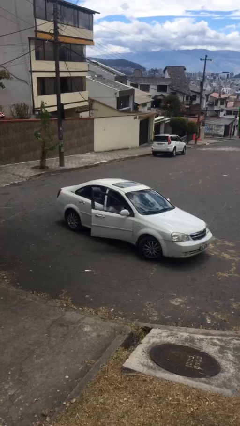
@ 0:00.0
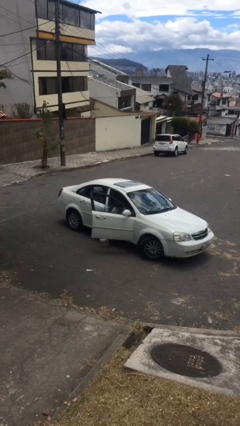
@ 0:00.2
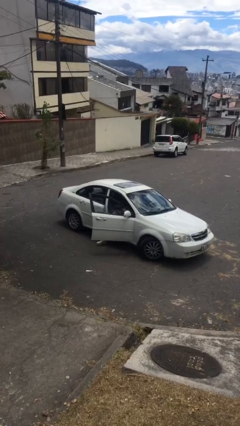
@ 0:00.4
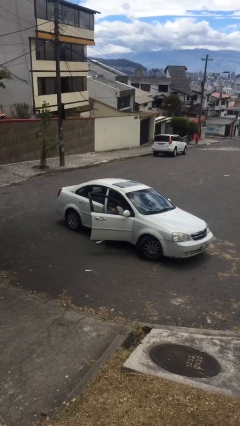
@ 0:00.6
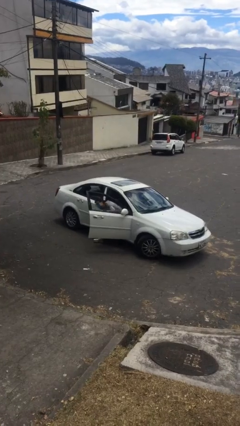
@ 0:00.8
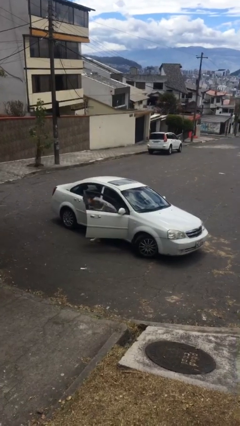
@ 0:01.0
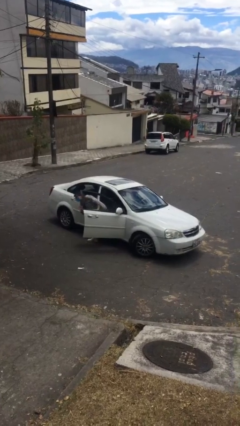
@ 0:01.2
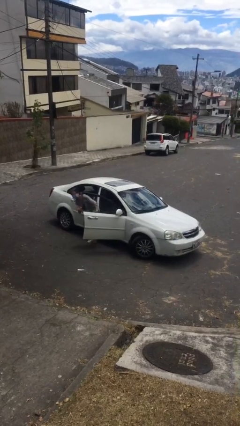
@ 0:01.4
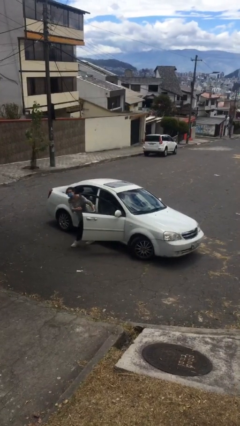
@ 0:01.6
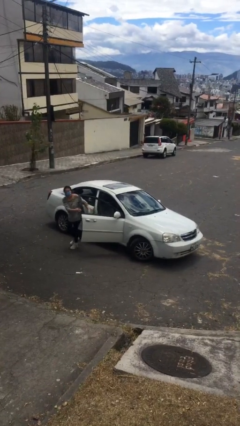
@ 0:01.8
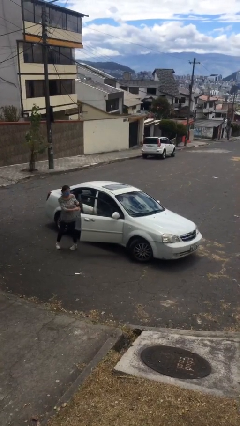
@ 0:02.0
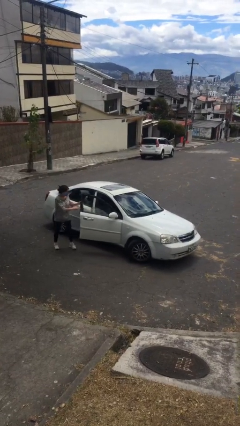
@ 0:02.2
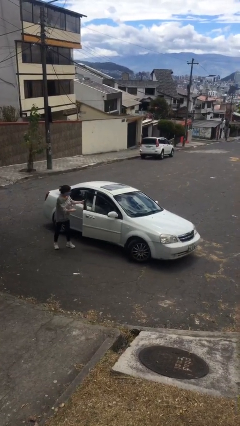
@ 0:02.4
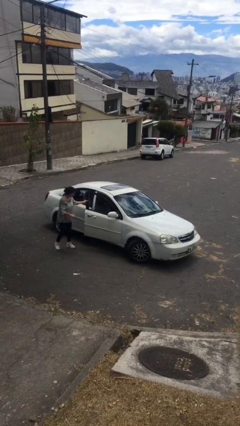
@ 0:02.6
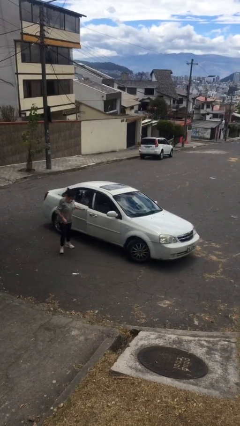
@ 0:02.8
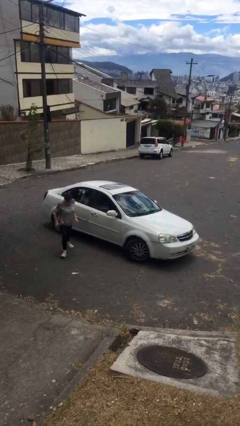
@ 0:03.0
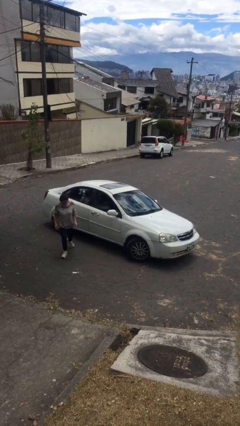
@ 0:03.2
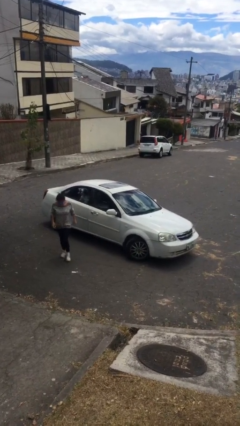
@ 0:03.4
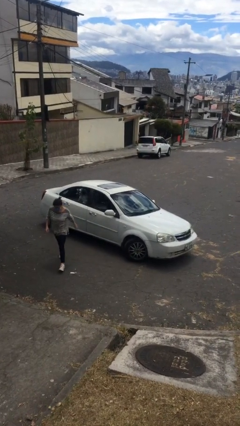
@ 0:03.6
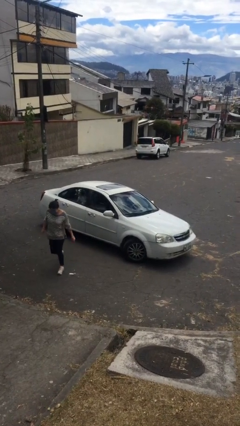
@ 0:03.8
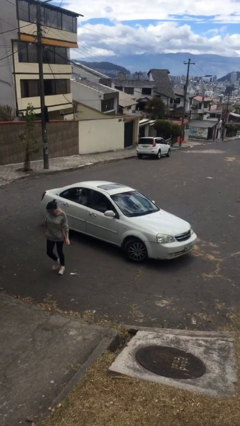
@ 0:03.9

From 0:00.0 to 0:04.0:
car drops off person

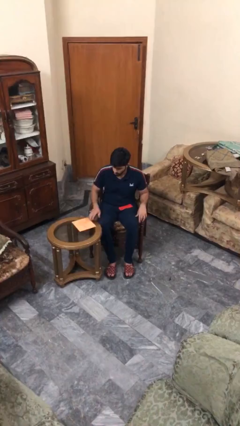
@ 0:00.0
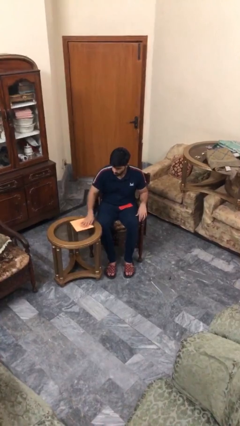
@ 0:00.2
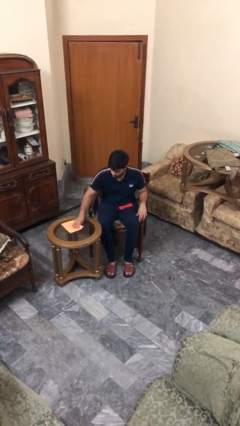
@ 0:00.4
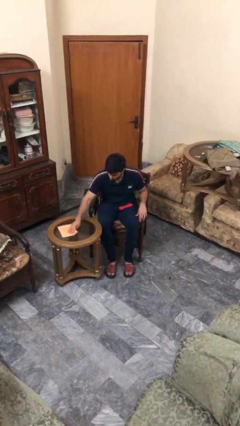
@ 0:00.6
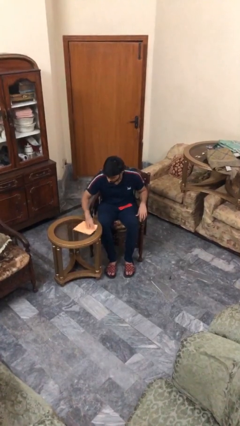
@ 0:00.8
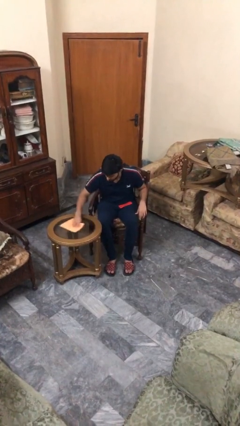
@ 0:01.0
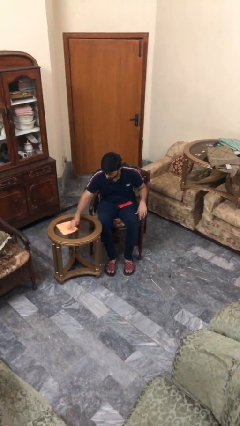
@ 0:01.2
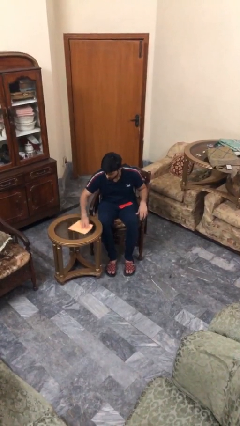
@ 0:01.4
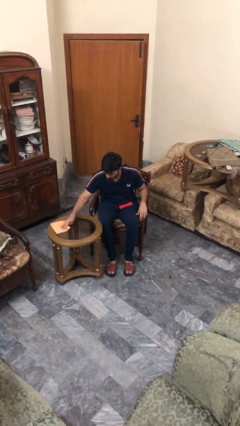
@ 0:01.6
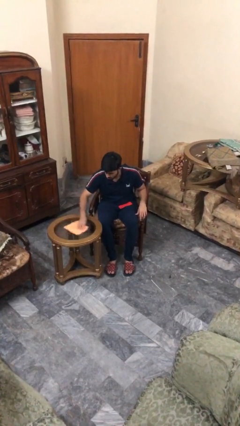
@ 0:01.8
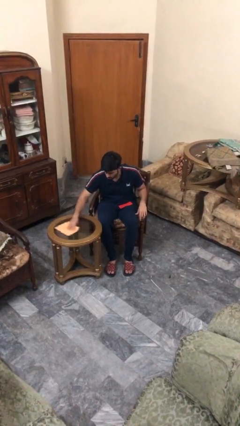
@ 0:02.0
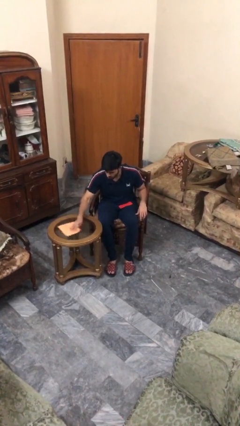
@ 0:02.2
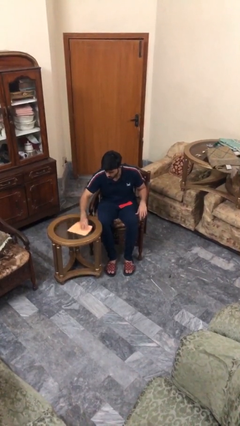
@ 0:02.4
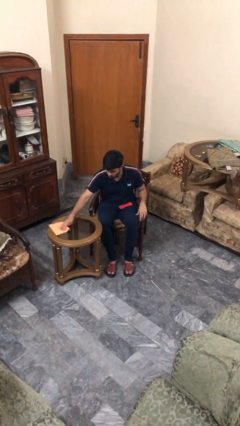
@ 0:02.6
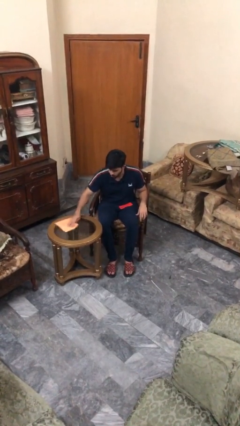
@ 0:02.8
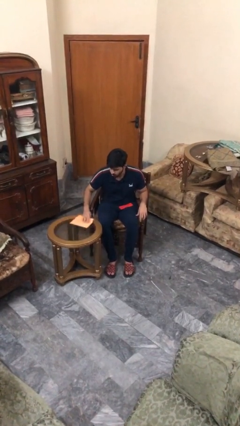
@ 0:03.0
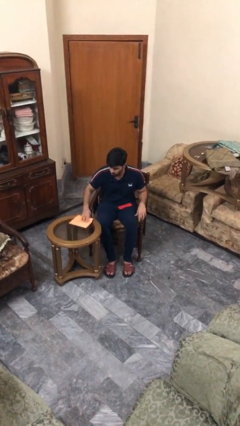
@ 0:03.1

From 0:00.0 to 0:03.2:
person cleans table with rag

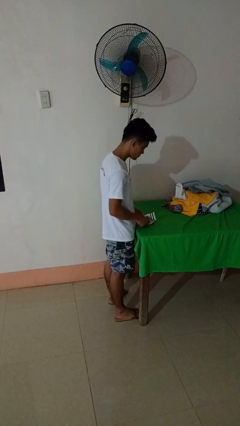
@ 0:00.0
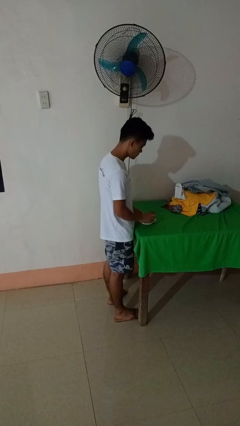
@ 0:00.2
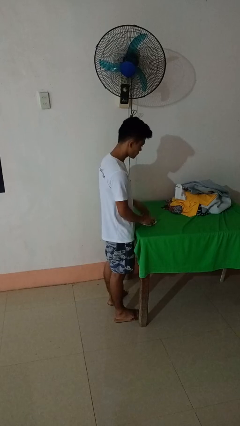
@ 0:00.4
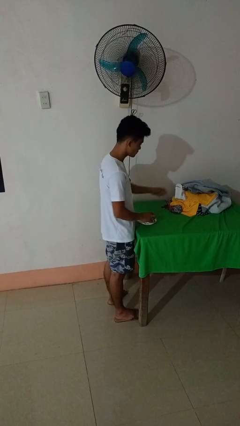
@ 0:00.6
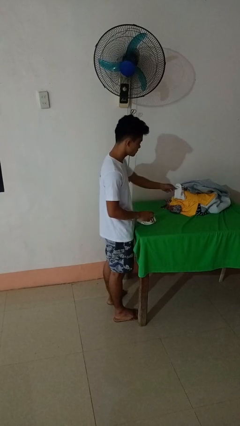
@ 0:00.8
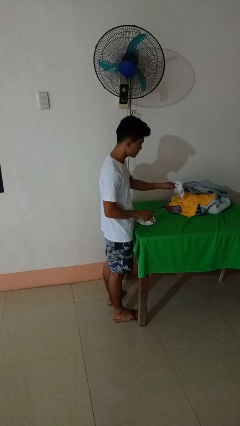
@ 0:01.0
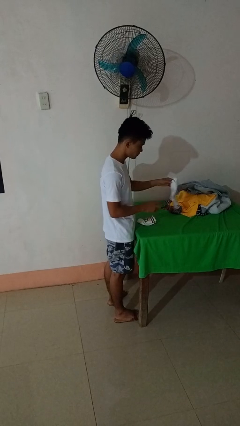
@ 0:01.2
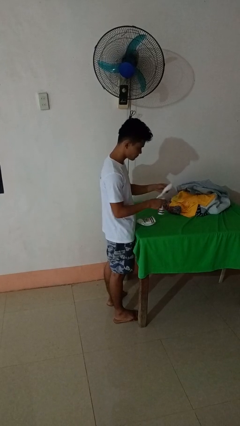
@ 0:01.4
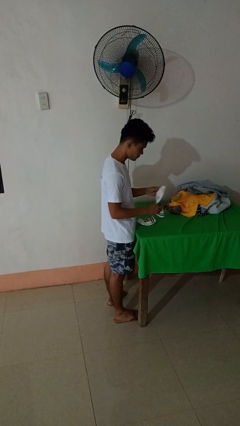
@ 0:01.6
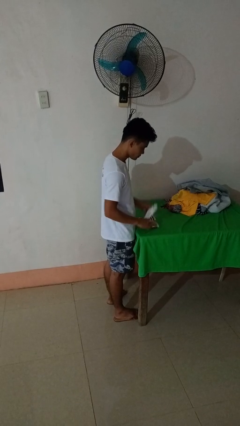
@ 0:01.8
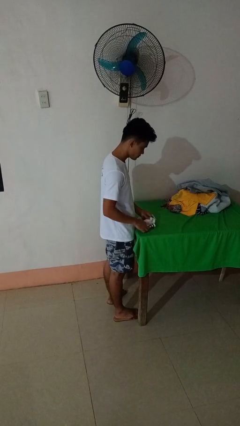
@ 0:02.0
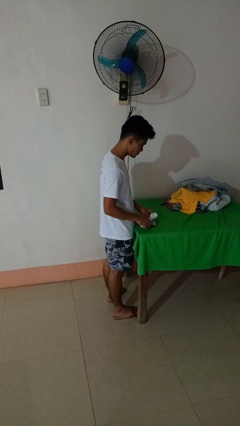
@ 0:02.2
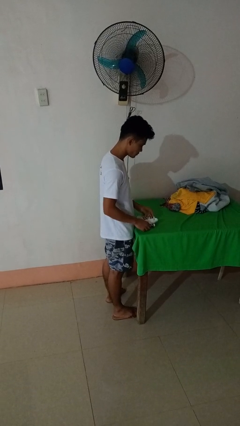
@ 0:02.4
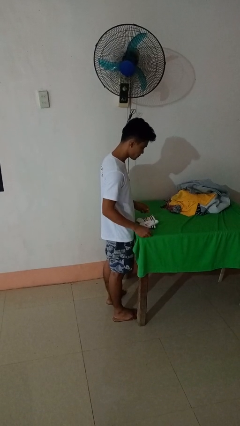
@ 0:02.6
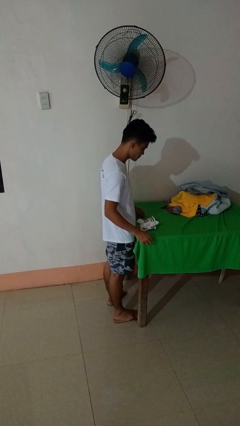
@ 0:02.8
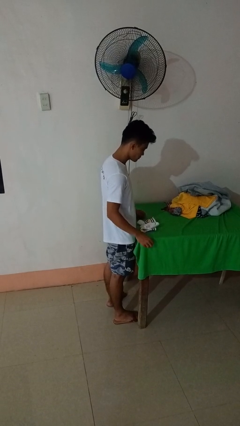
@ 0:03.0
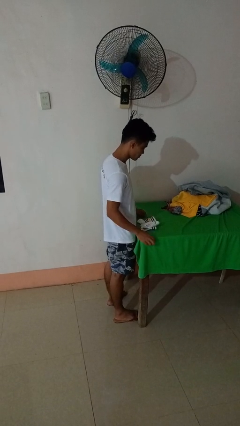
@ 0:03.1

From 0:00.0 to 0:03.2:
person folds socks

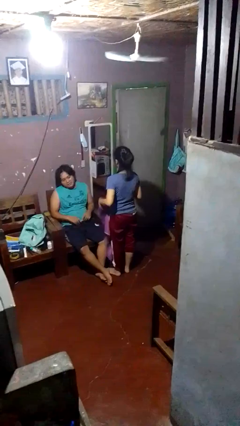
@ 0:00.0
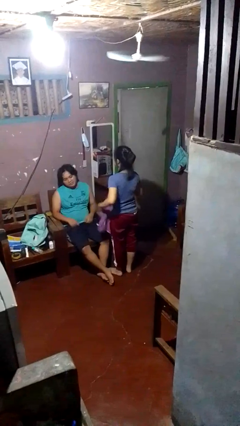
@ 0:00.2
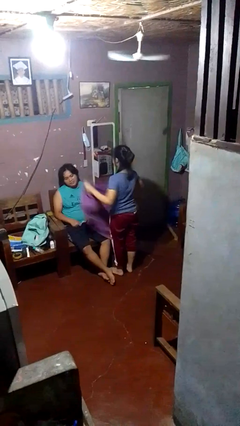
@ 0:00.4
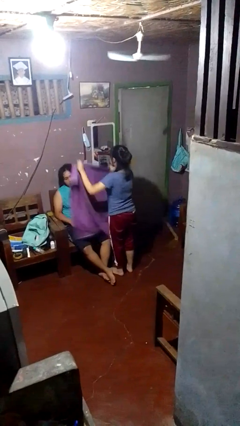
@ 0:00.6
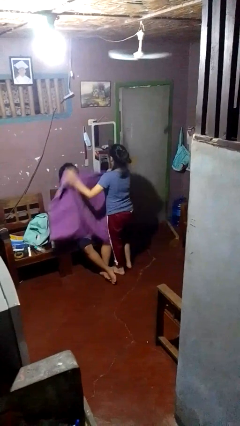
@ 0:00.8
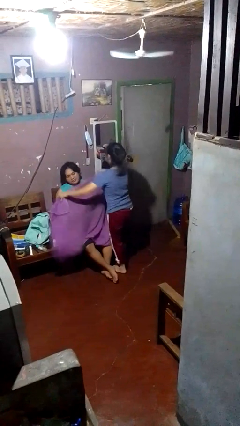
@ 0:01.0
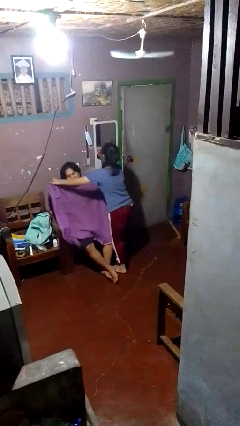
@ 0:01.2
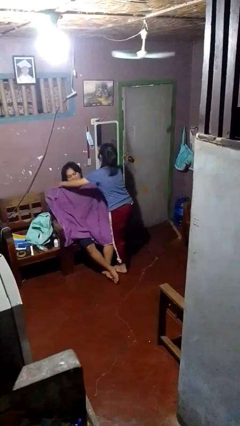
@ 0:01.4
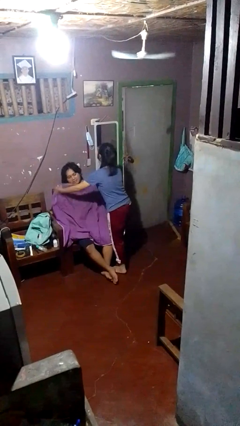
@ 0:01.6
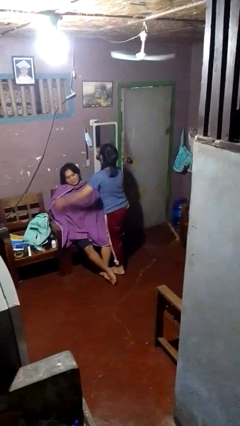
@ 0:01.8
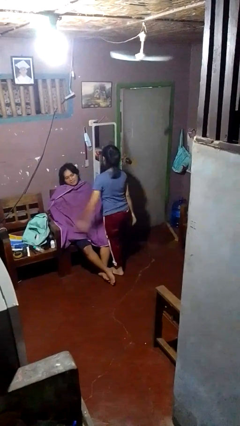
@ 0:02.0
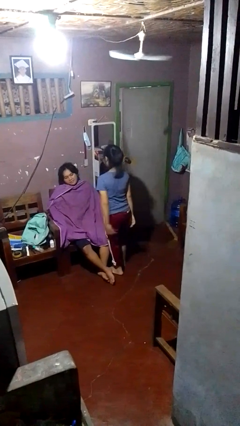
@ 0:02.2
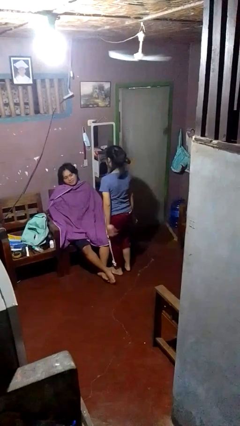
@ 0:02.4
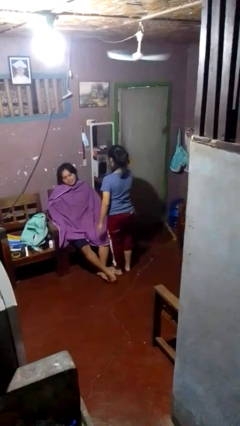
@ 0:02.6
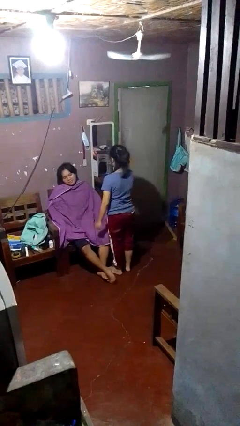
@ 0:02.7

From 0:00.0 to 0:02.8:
person covers friend with blanket

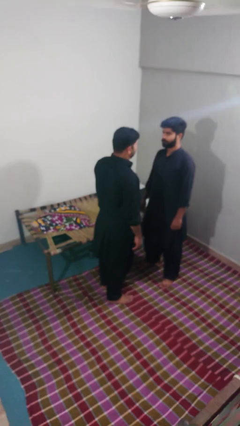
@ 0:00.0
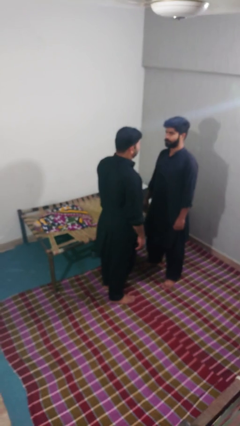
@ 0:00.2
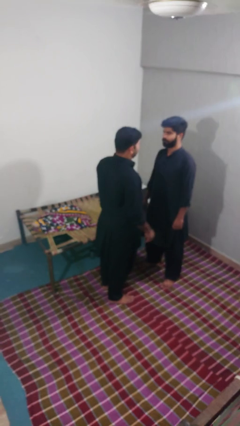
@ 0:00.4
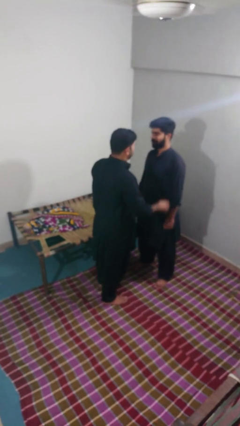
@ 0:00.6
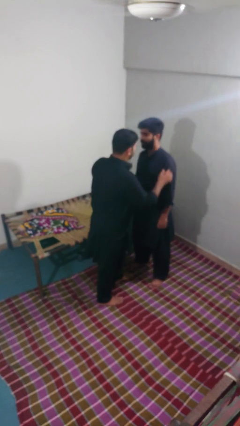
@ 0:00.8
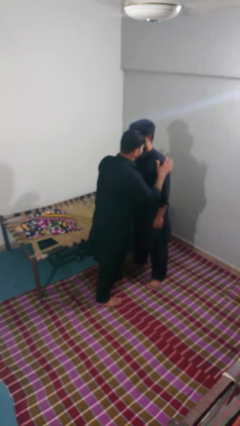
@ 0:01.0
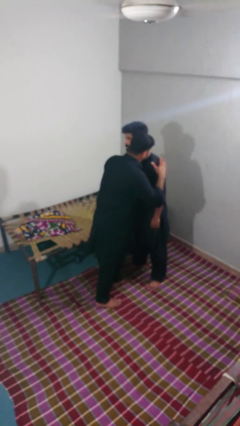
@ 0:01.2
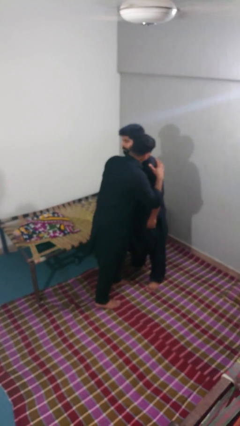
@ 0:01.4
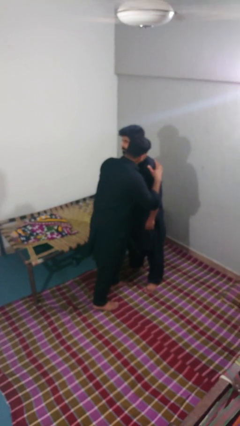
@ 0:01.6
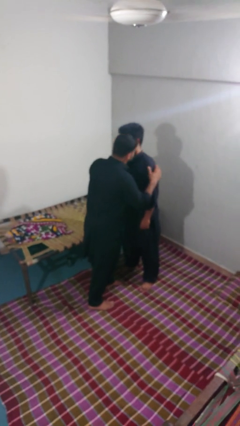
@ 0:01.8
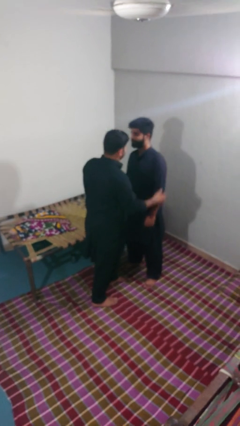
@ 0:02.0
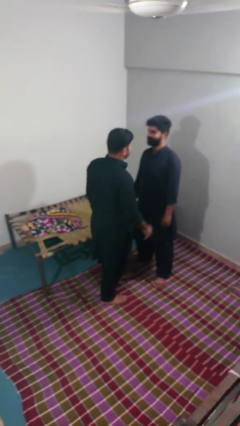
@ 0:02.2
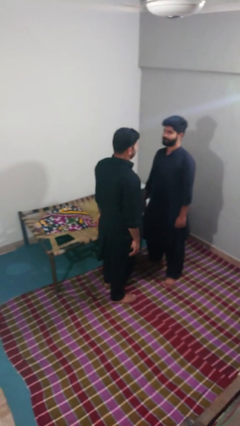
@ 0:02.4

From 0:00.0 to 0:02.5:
person kisses cheek of person

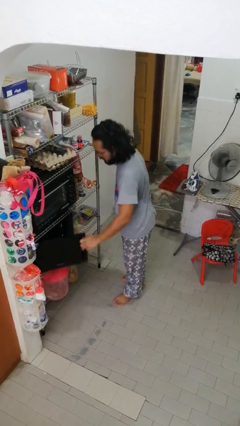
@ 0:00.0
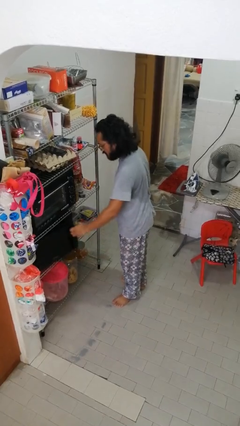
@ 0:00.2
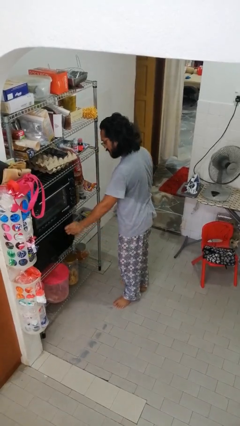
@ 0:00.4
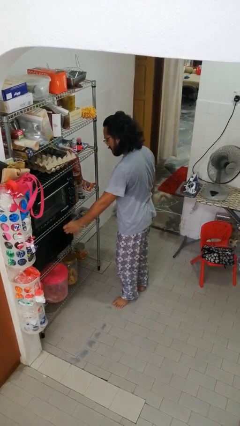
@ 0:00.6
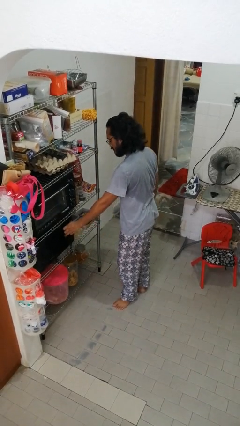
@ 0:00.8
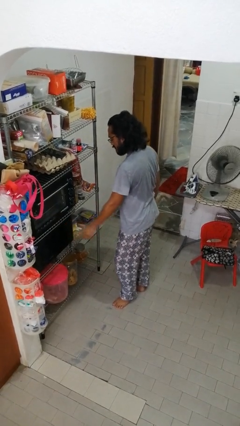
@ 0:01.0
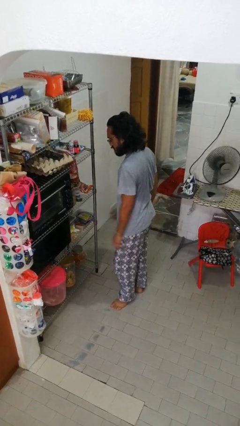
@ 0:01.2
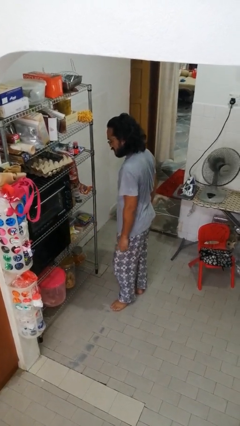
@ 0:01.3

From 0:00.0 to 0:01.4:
person closes microwave
